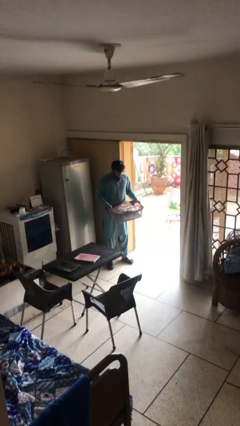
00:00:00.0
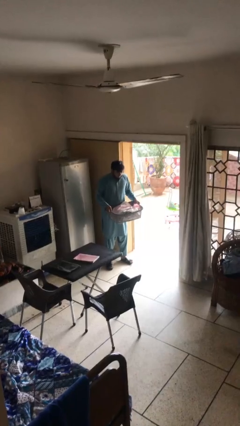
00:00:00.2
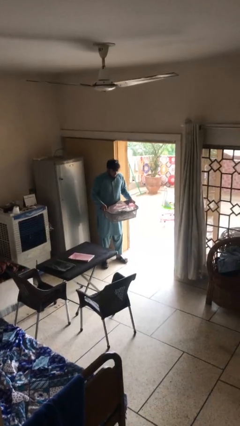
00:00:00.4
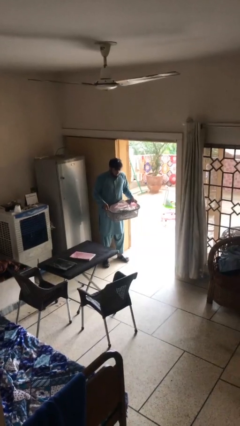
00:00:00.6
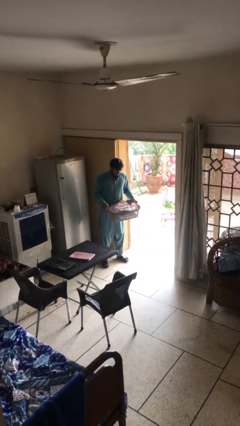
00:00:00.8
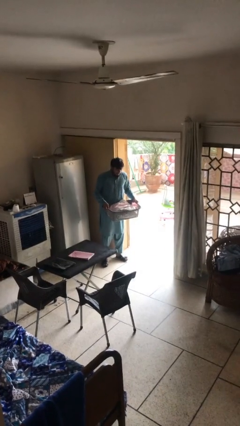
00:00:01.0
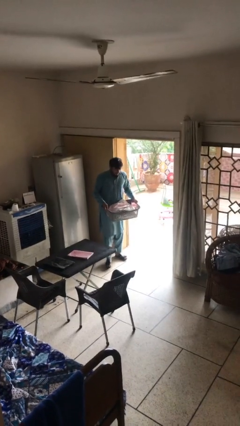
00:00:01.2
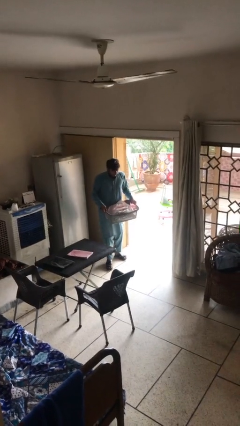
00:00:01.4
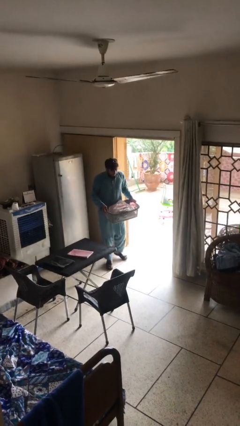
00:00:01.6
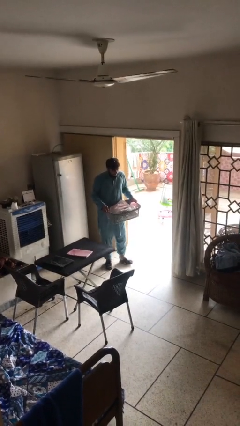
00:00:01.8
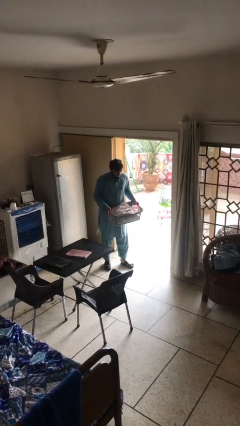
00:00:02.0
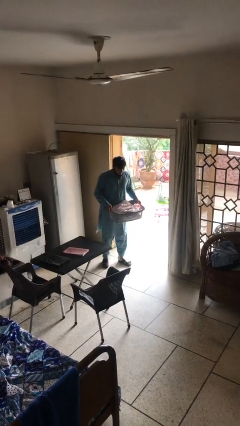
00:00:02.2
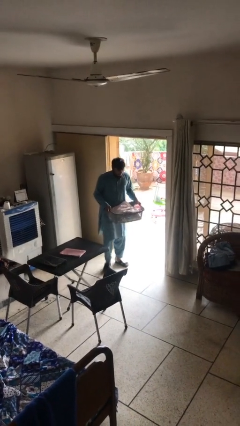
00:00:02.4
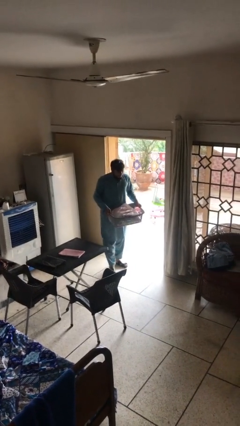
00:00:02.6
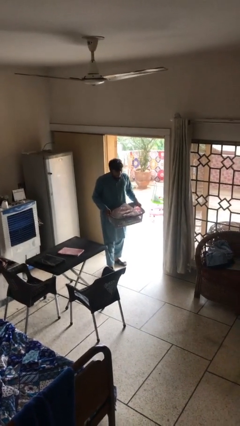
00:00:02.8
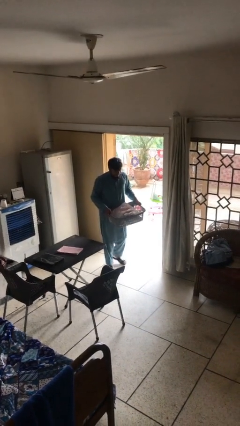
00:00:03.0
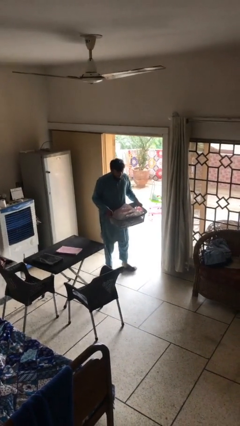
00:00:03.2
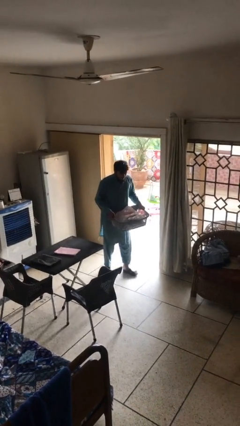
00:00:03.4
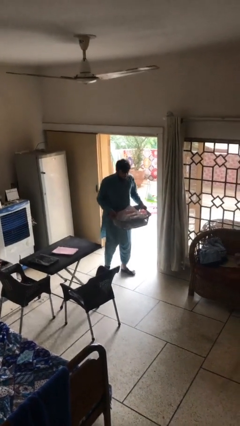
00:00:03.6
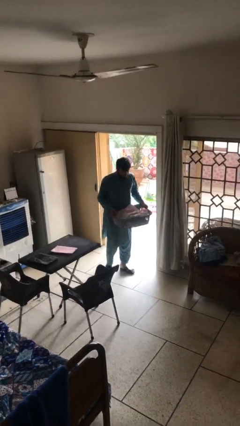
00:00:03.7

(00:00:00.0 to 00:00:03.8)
person carries heavy object

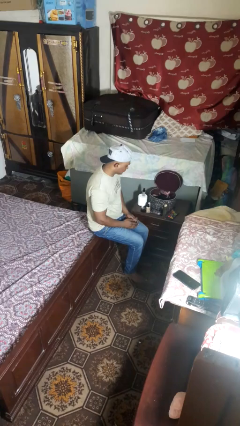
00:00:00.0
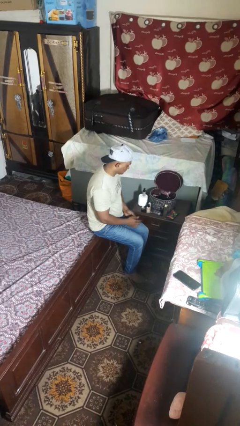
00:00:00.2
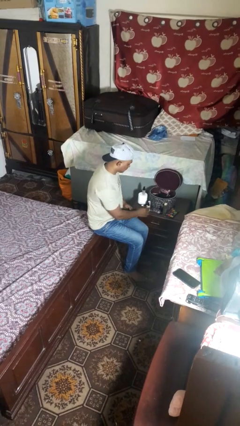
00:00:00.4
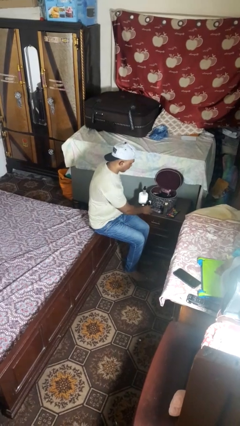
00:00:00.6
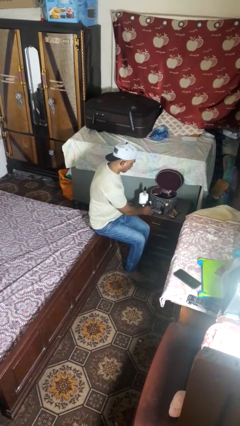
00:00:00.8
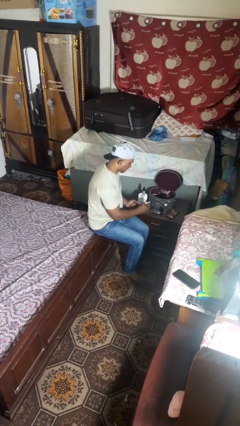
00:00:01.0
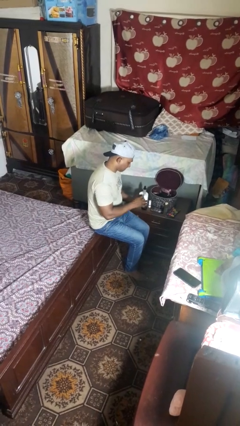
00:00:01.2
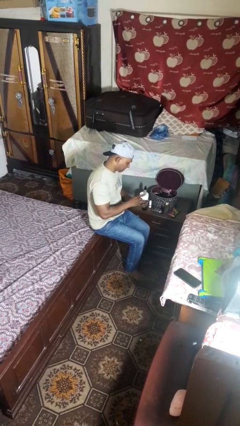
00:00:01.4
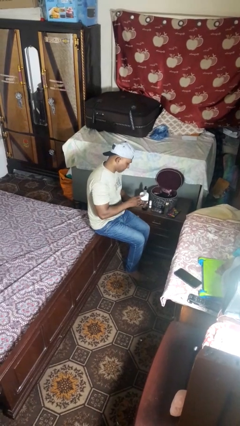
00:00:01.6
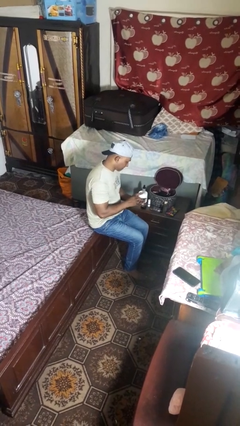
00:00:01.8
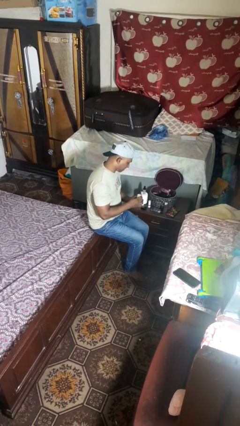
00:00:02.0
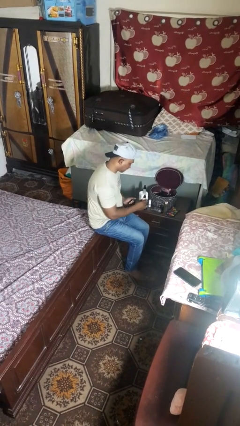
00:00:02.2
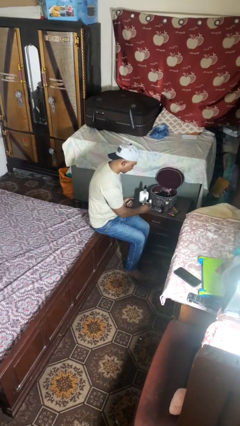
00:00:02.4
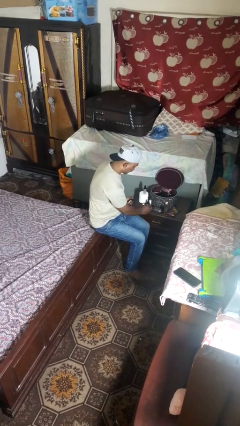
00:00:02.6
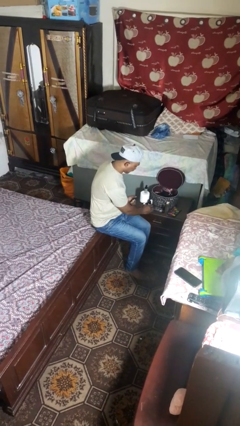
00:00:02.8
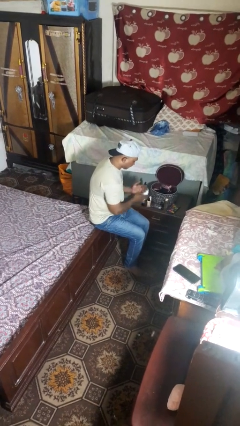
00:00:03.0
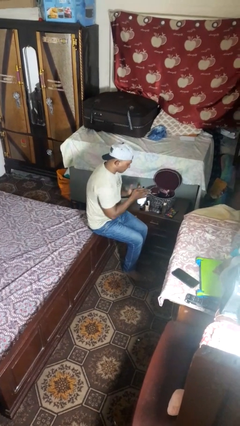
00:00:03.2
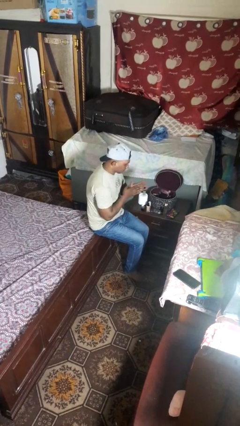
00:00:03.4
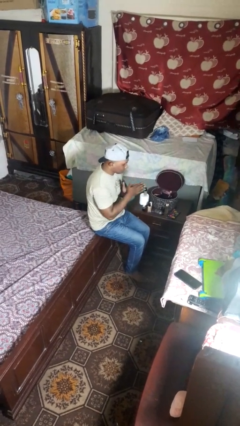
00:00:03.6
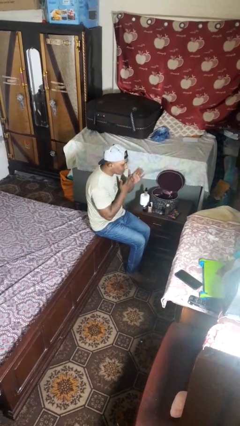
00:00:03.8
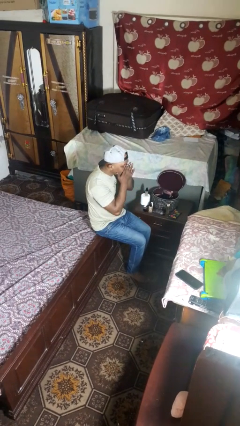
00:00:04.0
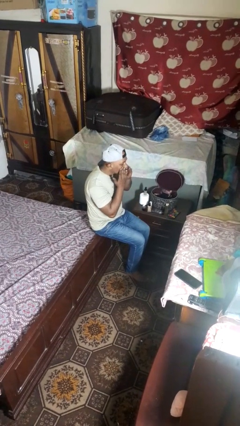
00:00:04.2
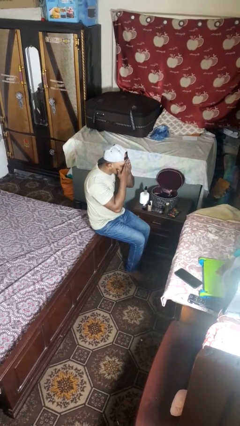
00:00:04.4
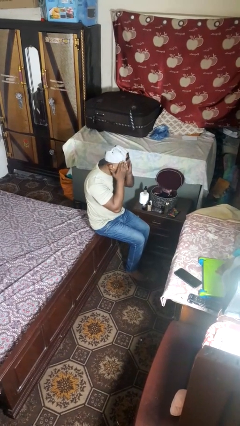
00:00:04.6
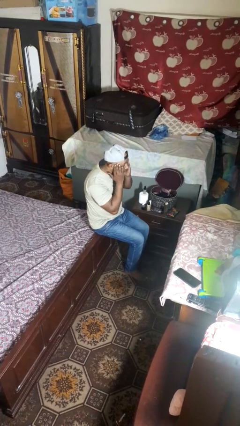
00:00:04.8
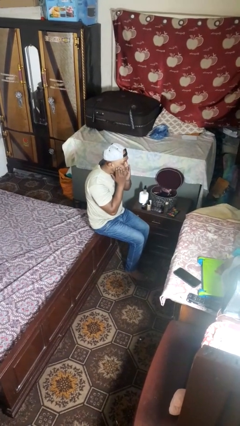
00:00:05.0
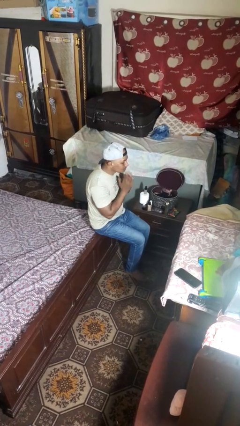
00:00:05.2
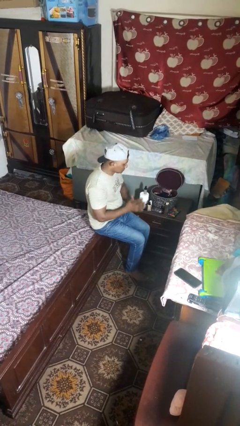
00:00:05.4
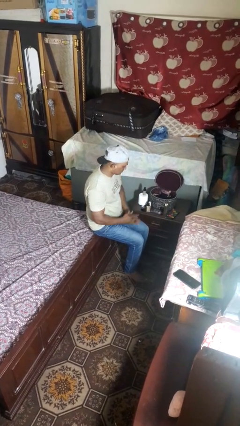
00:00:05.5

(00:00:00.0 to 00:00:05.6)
person applies foundation makeup

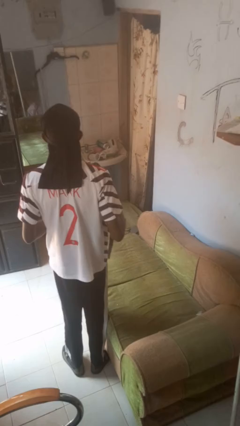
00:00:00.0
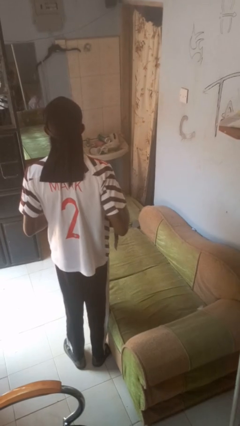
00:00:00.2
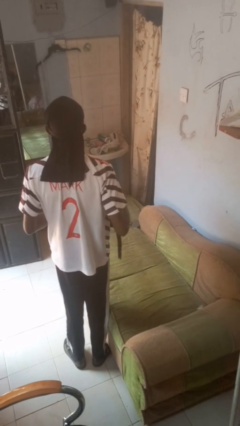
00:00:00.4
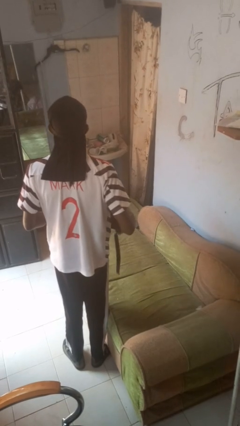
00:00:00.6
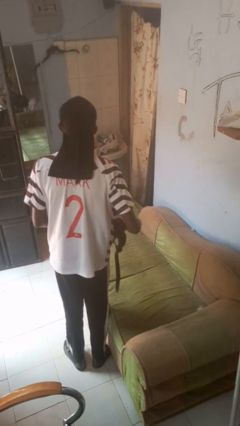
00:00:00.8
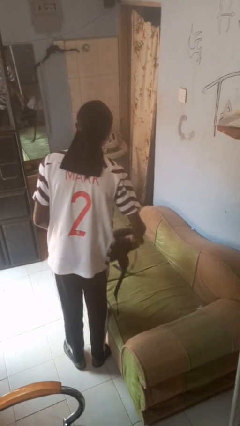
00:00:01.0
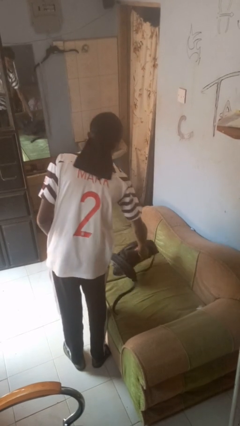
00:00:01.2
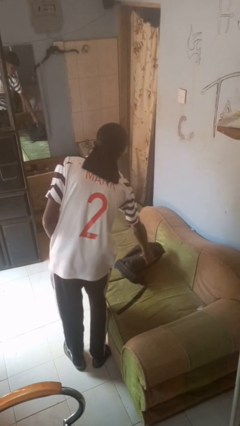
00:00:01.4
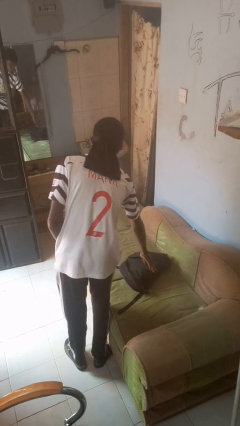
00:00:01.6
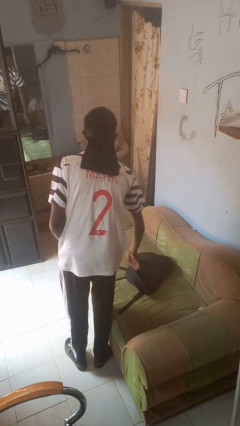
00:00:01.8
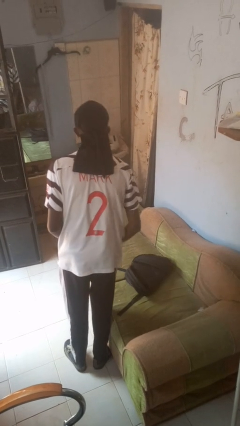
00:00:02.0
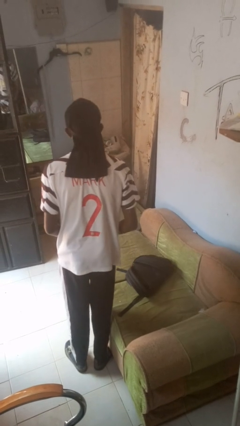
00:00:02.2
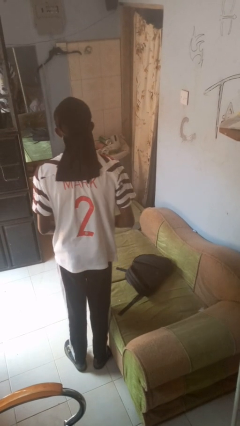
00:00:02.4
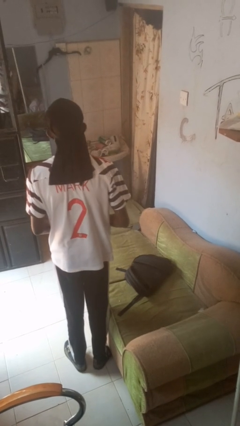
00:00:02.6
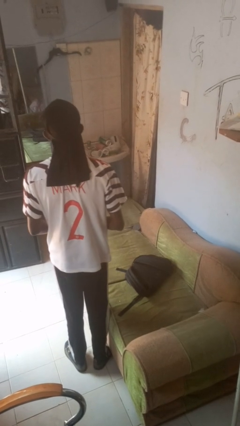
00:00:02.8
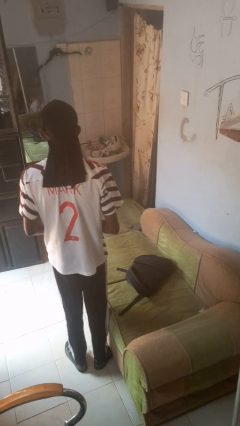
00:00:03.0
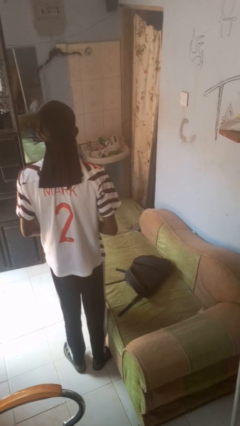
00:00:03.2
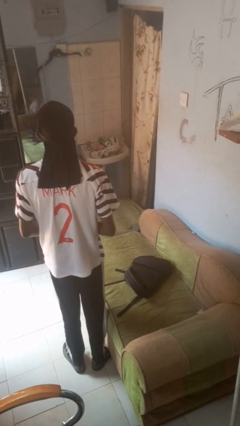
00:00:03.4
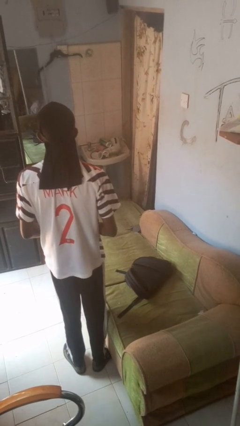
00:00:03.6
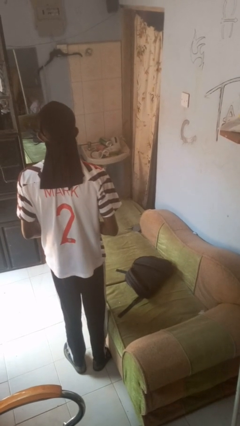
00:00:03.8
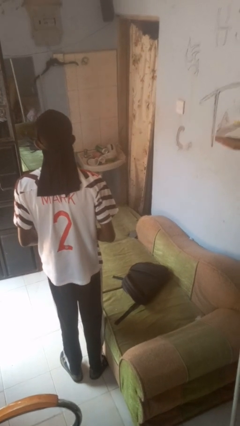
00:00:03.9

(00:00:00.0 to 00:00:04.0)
person puts down object on couch

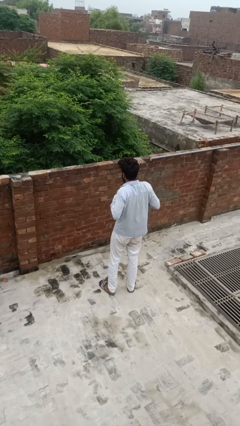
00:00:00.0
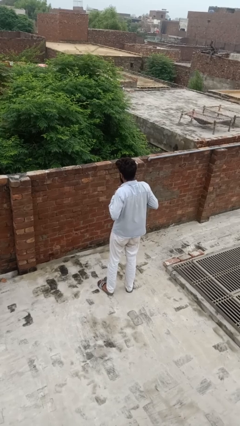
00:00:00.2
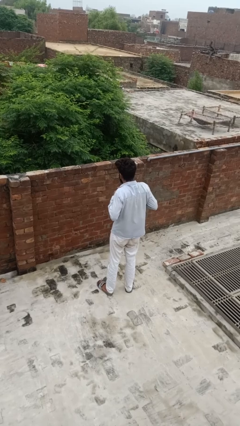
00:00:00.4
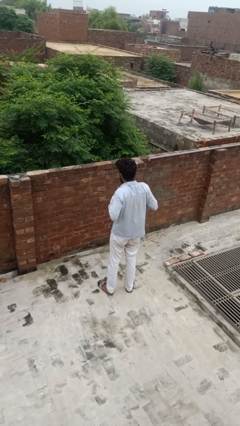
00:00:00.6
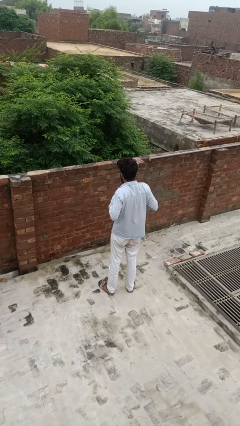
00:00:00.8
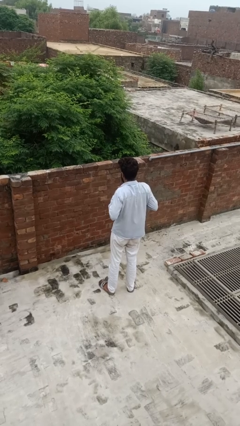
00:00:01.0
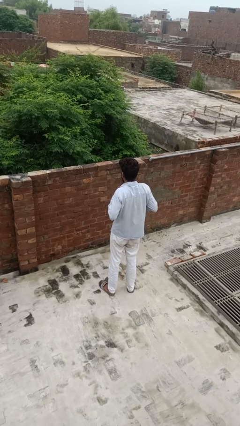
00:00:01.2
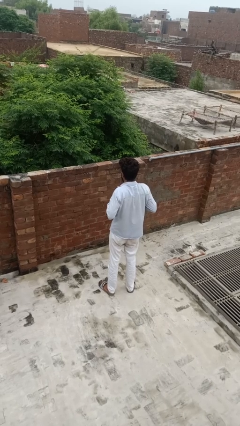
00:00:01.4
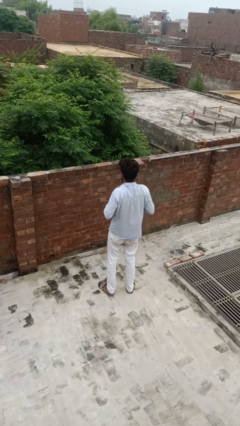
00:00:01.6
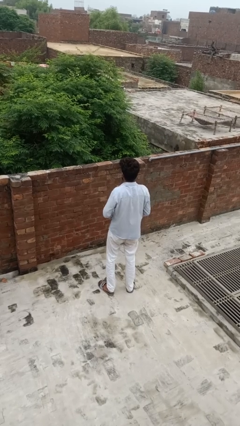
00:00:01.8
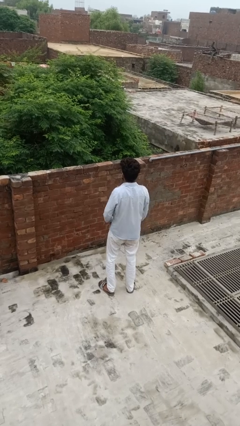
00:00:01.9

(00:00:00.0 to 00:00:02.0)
person cracks knuckles

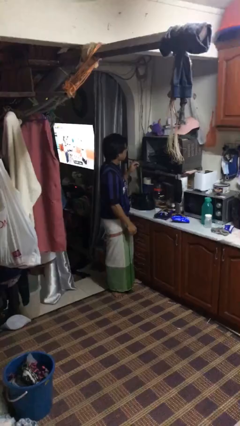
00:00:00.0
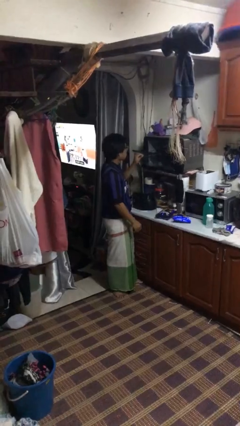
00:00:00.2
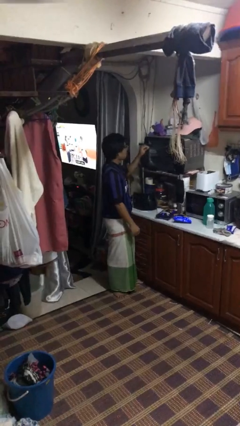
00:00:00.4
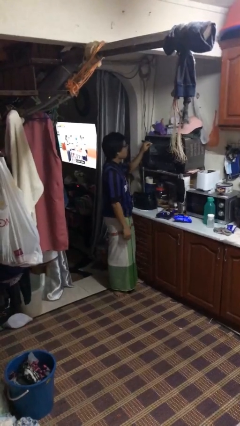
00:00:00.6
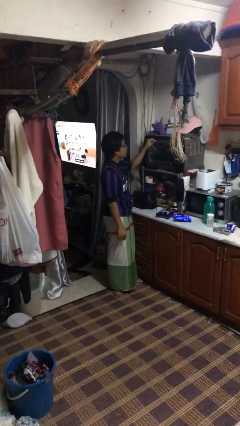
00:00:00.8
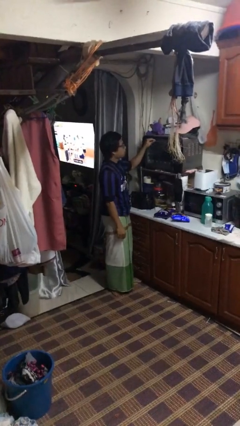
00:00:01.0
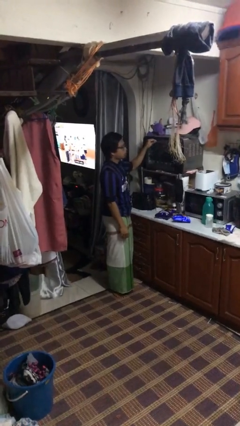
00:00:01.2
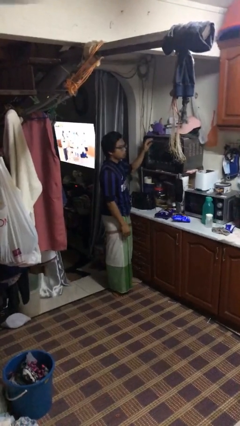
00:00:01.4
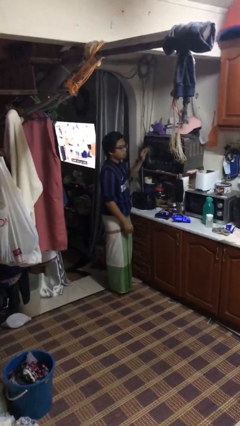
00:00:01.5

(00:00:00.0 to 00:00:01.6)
person closes oven door

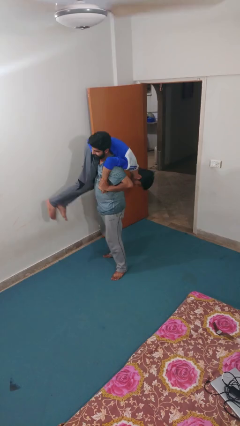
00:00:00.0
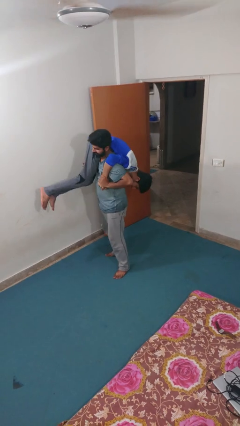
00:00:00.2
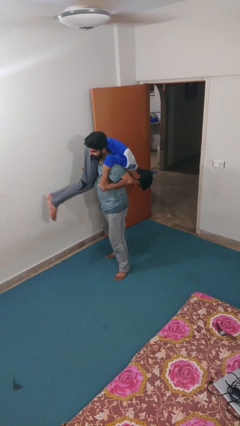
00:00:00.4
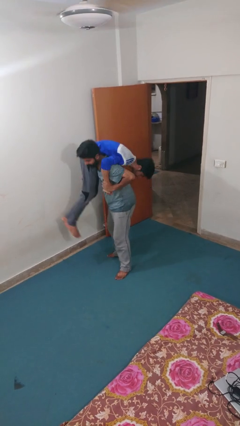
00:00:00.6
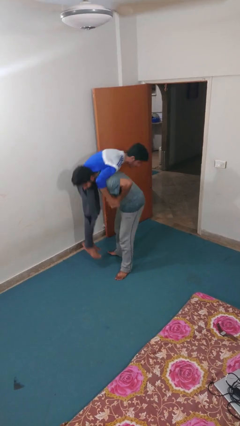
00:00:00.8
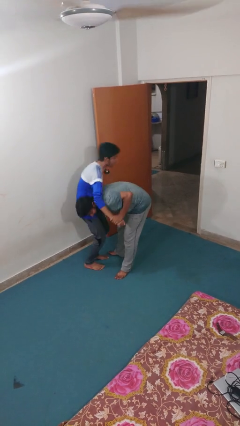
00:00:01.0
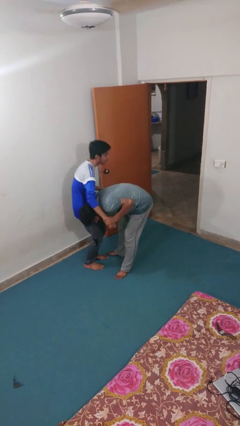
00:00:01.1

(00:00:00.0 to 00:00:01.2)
person puts down person
